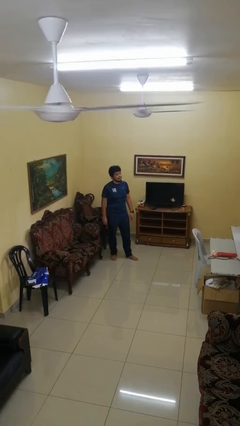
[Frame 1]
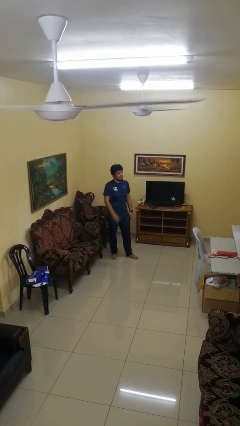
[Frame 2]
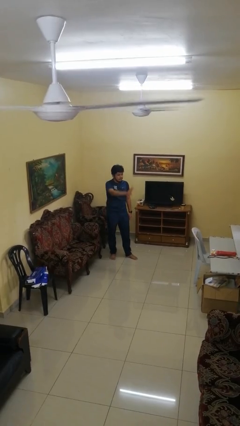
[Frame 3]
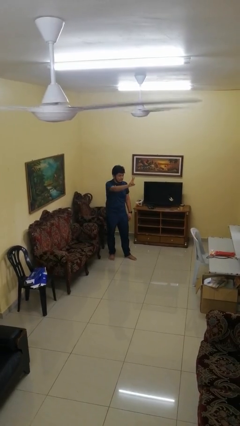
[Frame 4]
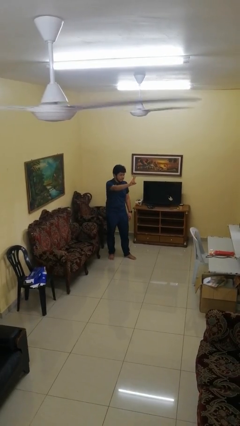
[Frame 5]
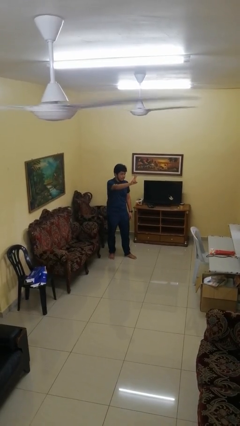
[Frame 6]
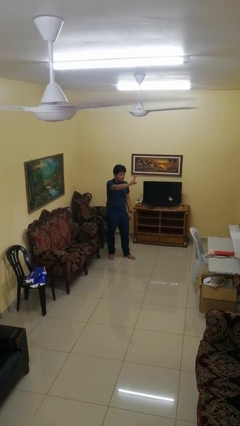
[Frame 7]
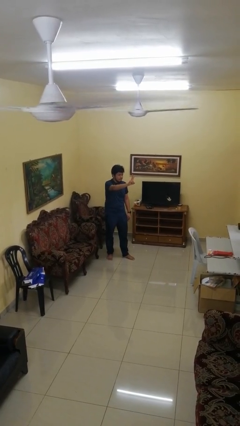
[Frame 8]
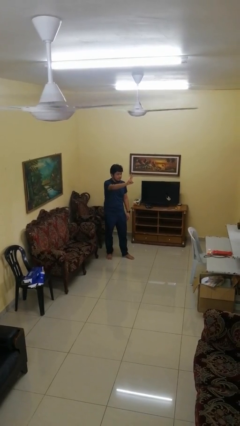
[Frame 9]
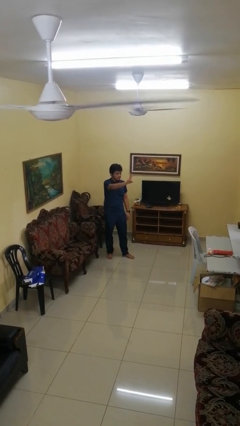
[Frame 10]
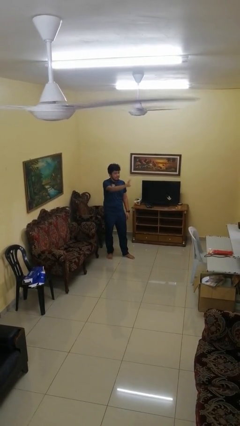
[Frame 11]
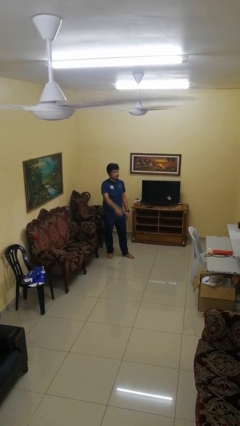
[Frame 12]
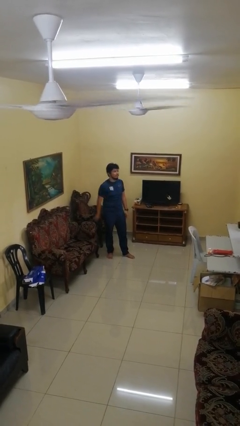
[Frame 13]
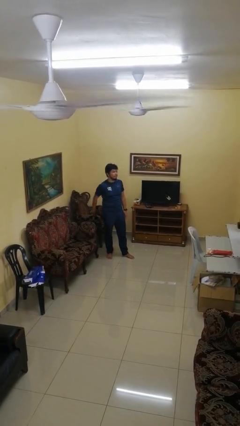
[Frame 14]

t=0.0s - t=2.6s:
person gestures peace

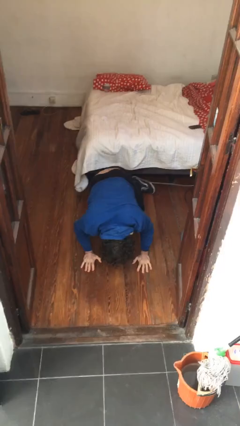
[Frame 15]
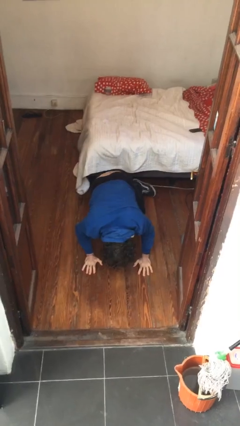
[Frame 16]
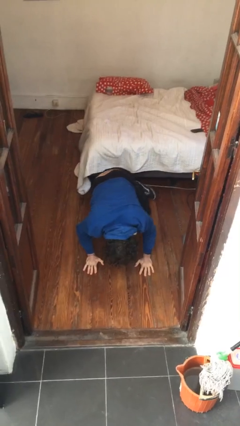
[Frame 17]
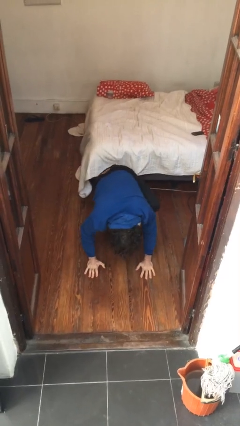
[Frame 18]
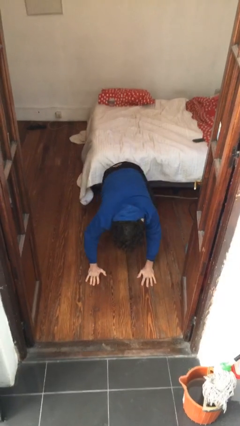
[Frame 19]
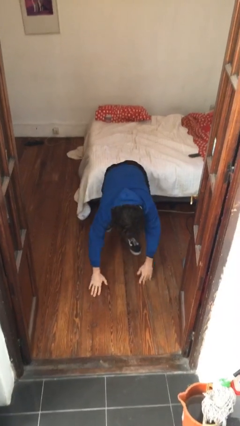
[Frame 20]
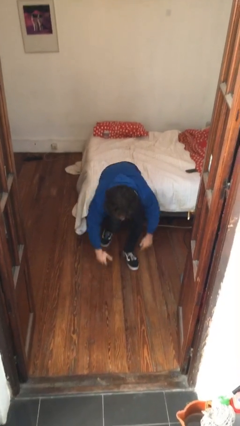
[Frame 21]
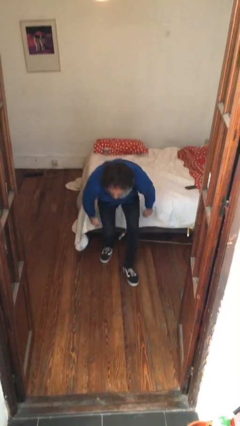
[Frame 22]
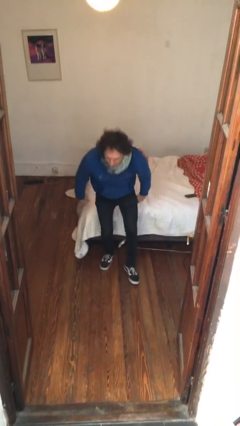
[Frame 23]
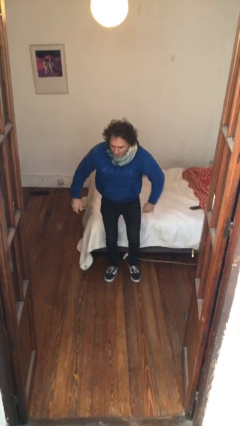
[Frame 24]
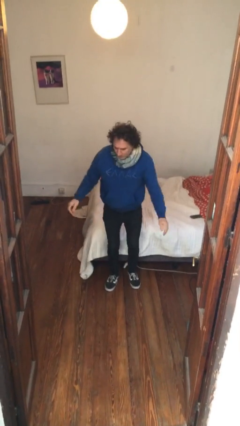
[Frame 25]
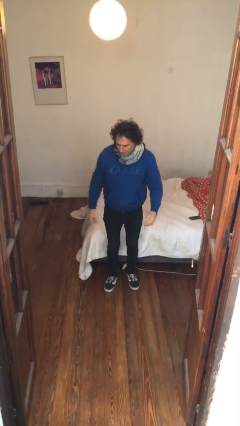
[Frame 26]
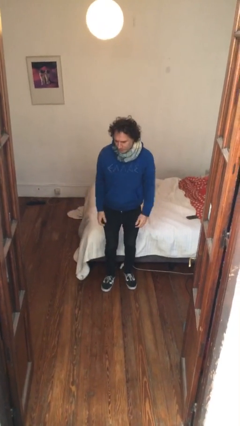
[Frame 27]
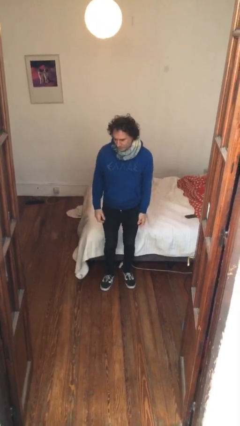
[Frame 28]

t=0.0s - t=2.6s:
person stands up from floor

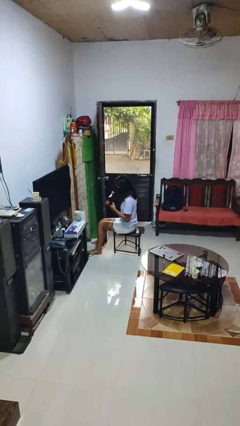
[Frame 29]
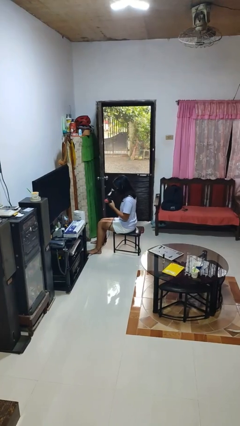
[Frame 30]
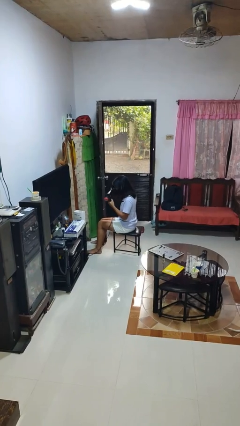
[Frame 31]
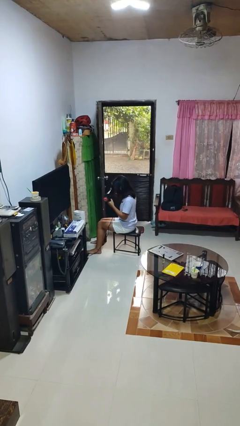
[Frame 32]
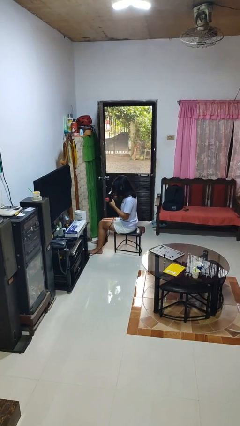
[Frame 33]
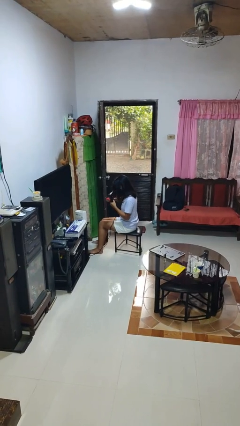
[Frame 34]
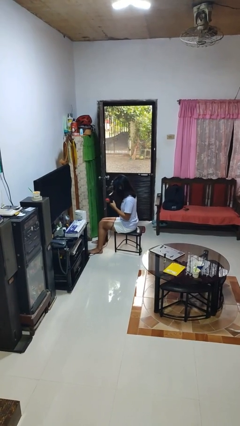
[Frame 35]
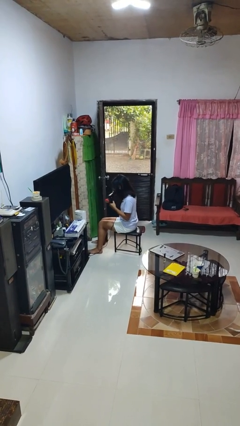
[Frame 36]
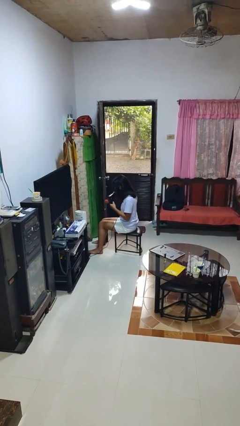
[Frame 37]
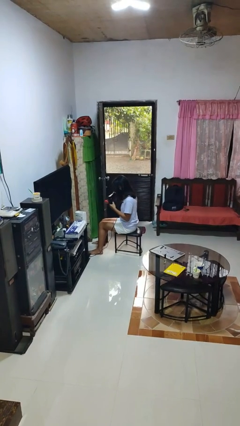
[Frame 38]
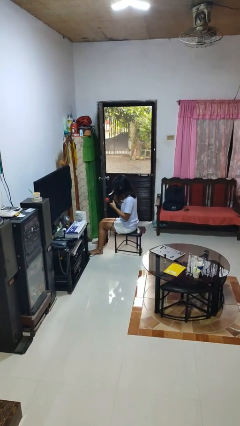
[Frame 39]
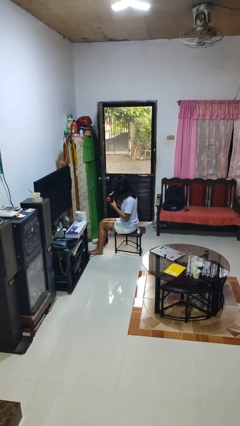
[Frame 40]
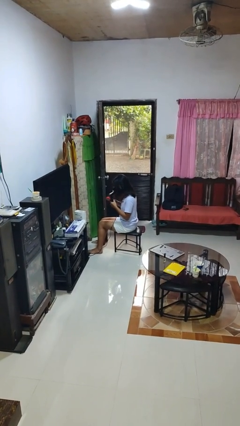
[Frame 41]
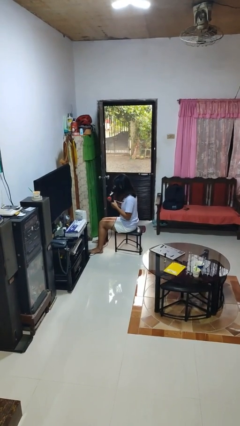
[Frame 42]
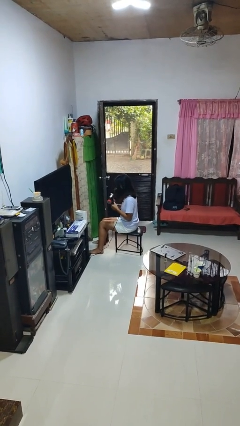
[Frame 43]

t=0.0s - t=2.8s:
person dries hair with hairdryer

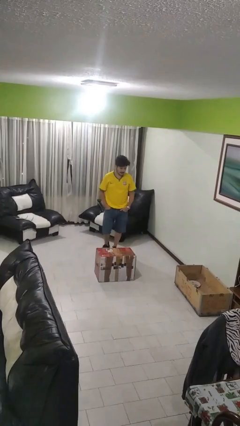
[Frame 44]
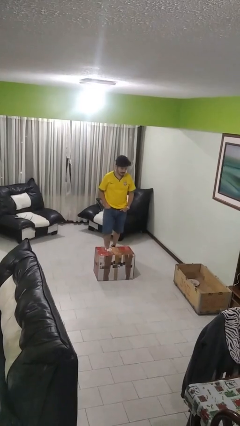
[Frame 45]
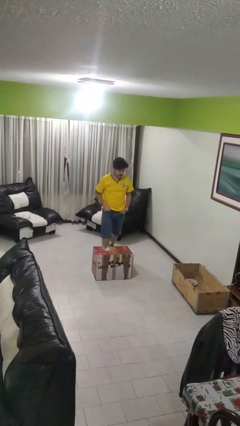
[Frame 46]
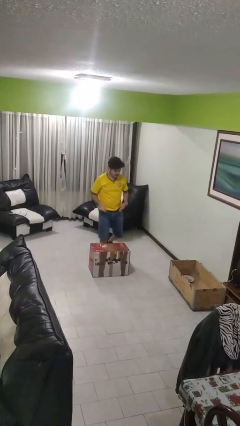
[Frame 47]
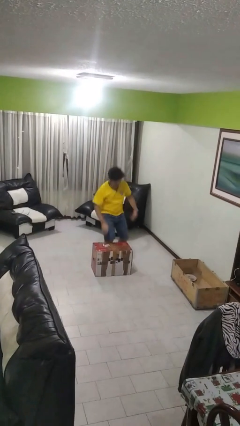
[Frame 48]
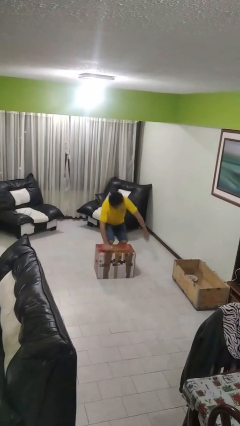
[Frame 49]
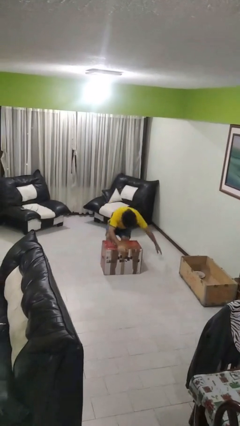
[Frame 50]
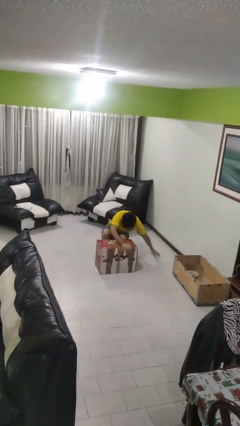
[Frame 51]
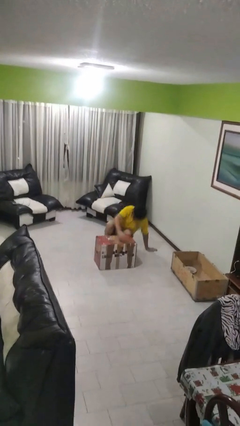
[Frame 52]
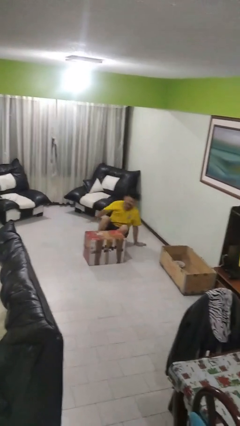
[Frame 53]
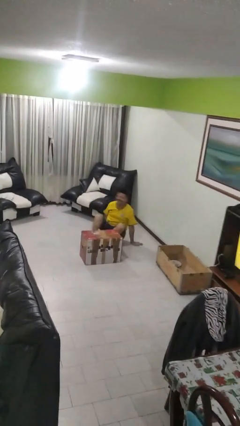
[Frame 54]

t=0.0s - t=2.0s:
person trips on object on floor

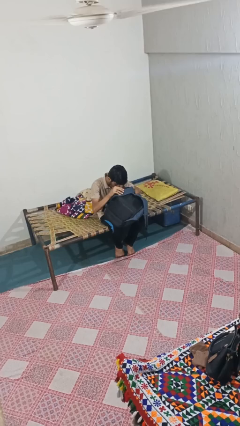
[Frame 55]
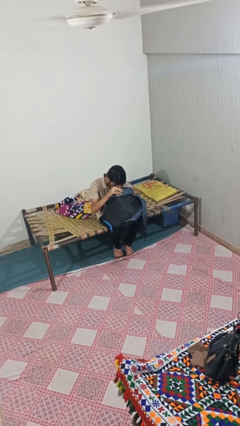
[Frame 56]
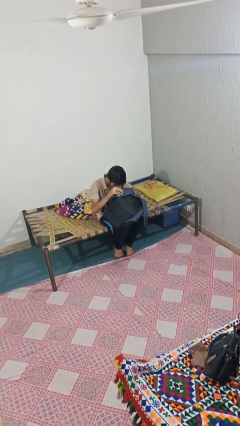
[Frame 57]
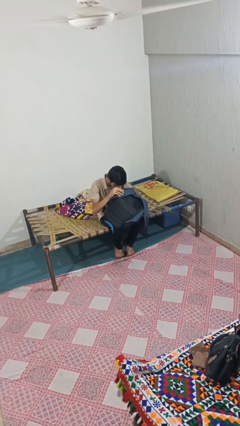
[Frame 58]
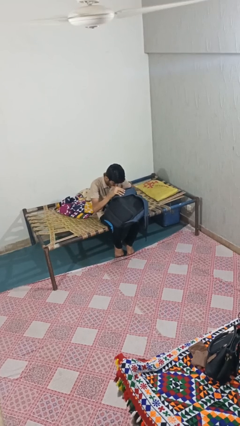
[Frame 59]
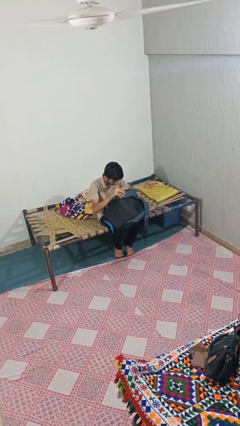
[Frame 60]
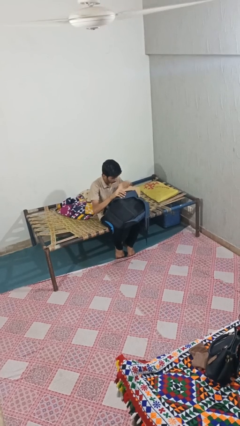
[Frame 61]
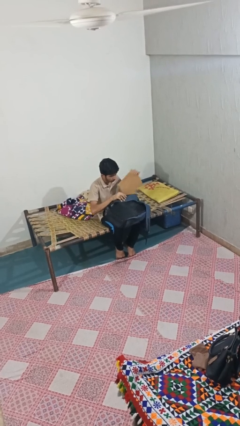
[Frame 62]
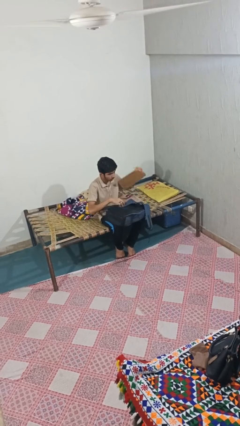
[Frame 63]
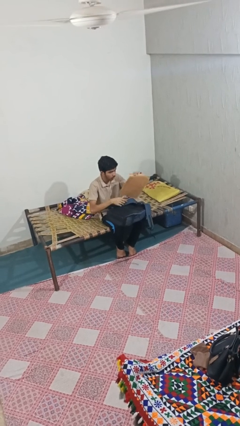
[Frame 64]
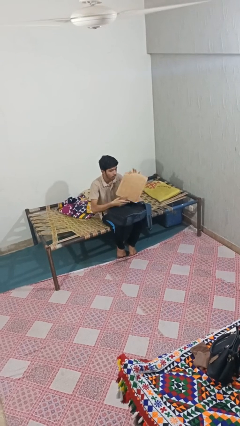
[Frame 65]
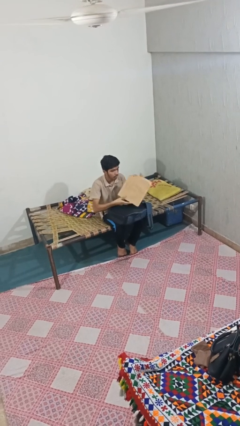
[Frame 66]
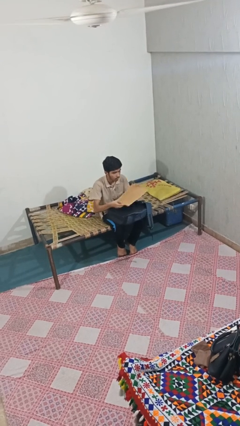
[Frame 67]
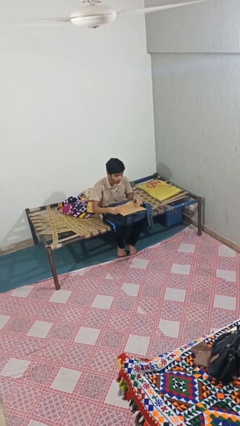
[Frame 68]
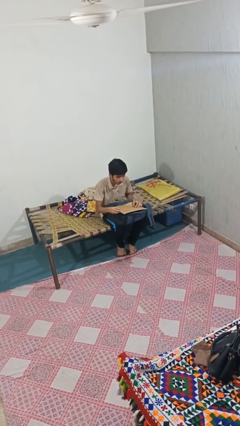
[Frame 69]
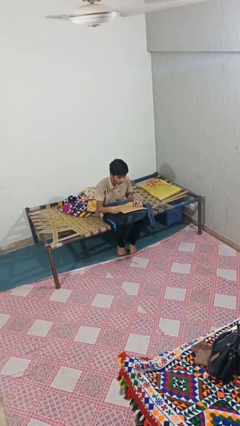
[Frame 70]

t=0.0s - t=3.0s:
person takes object from backpack

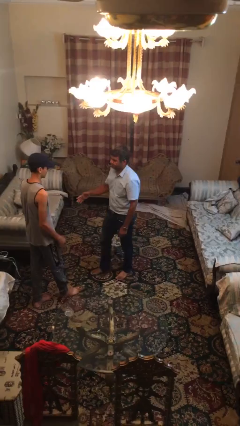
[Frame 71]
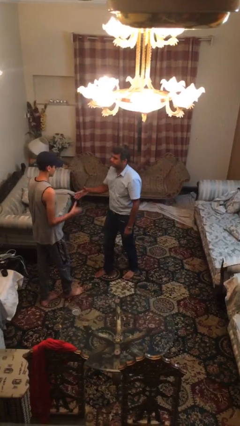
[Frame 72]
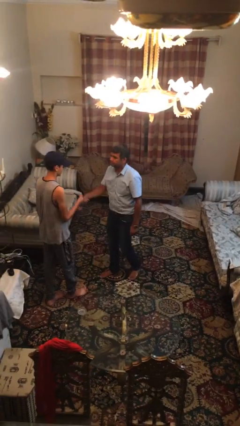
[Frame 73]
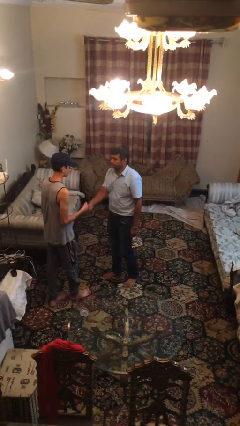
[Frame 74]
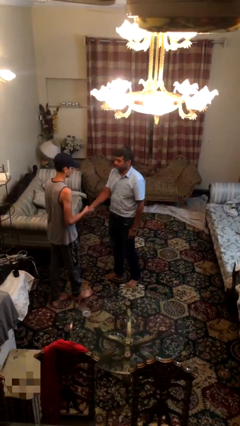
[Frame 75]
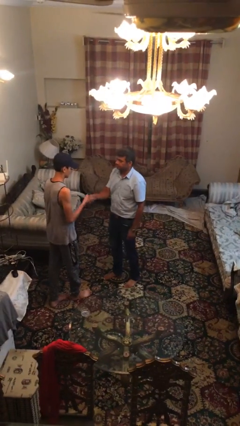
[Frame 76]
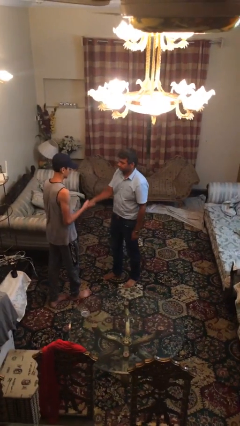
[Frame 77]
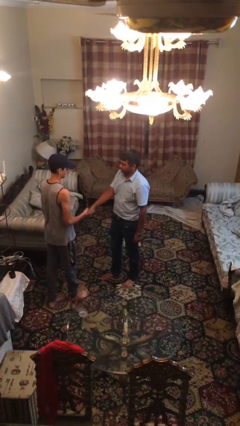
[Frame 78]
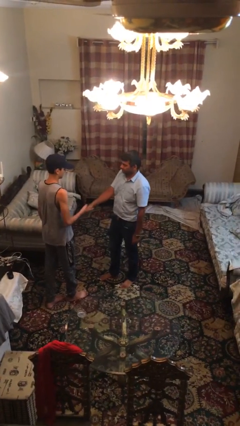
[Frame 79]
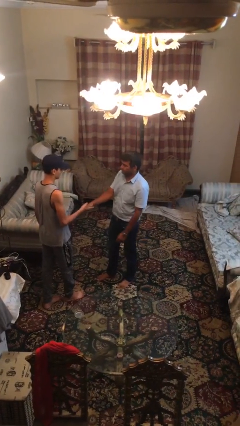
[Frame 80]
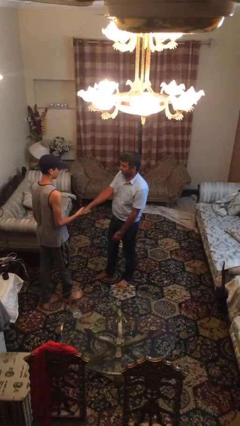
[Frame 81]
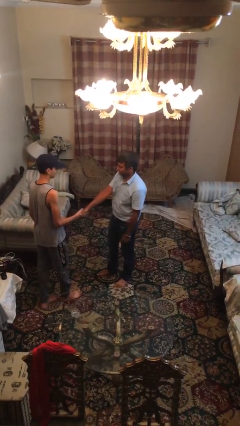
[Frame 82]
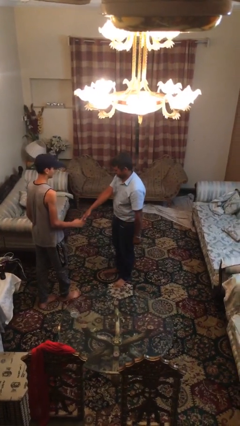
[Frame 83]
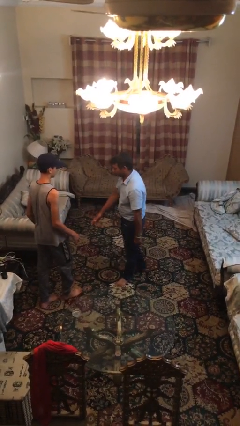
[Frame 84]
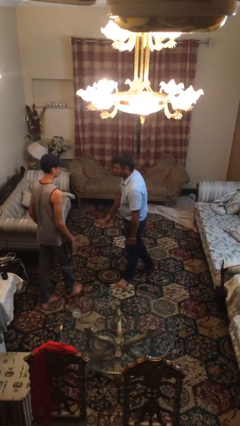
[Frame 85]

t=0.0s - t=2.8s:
person shakes hand

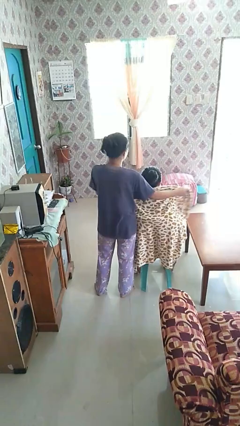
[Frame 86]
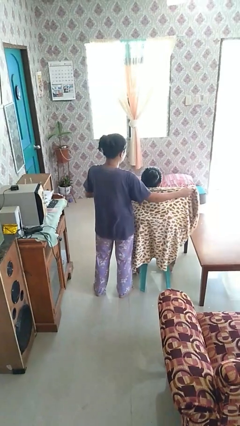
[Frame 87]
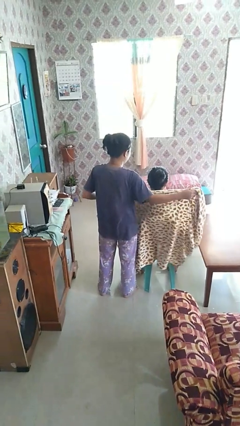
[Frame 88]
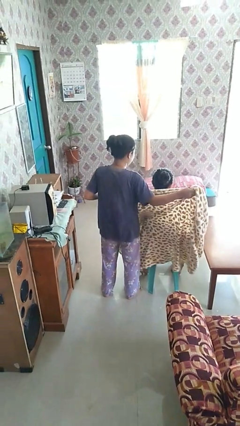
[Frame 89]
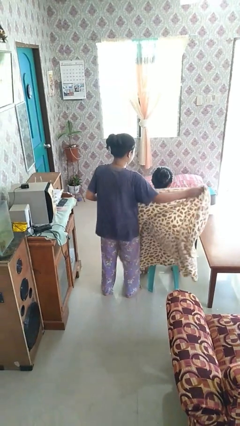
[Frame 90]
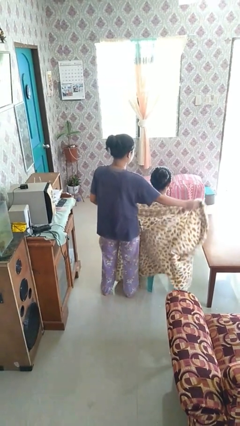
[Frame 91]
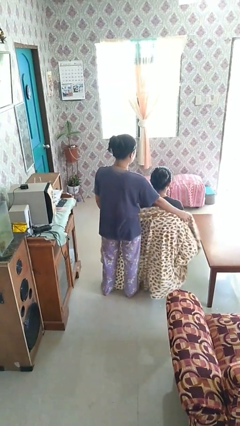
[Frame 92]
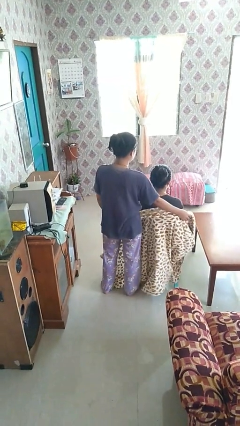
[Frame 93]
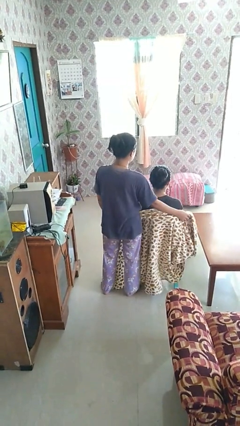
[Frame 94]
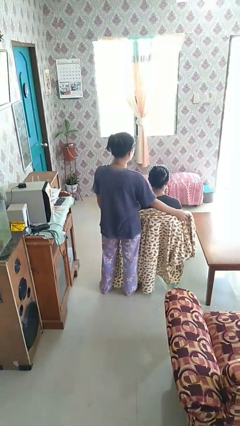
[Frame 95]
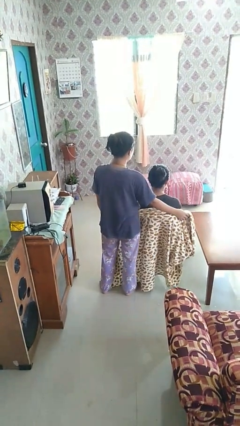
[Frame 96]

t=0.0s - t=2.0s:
person uncovers friend with blanket
